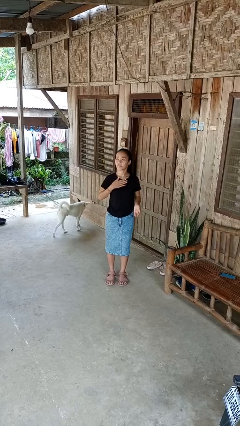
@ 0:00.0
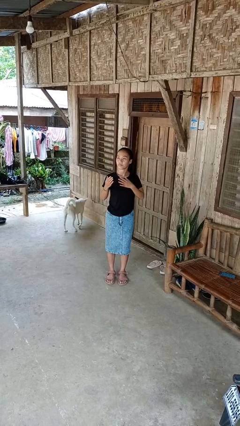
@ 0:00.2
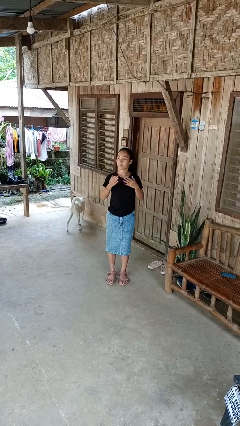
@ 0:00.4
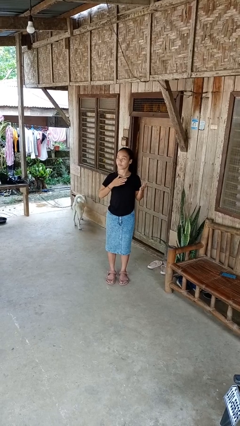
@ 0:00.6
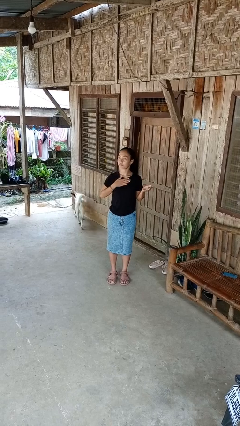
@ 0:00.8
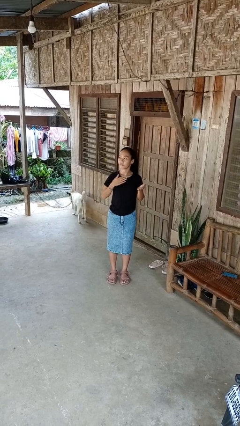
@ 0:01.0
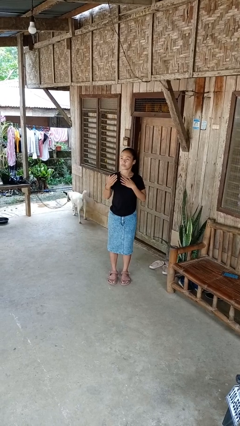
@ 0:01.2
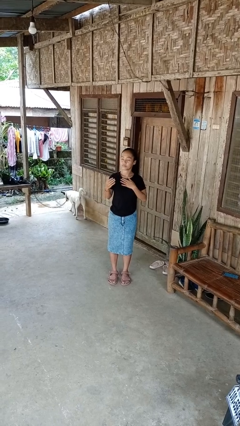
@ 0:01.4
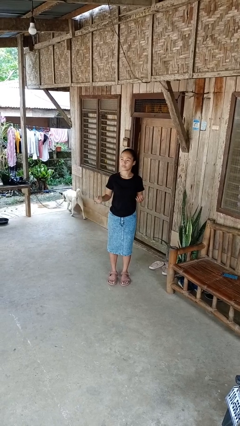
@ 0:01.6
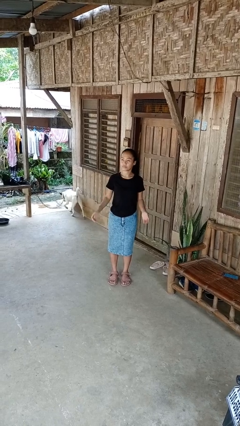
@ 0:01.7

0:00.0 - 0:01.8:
person drums on chest

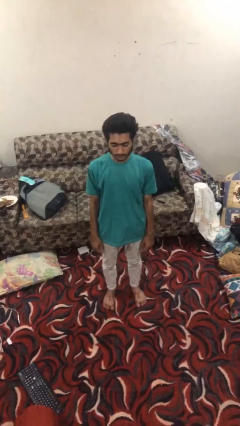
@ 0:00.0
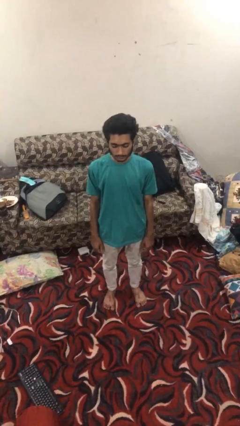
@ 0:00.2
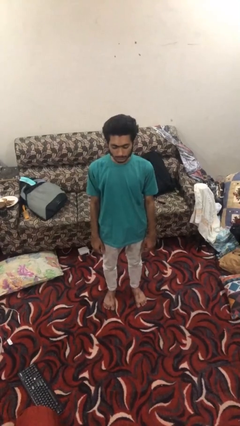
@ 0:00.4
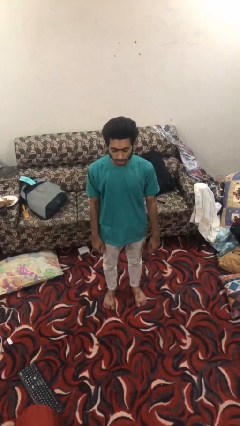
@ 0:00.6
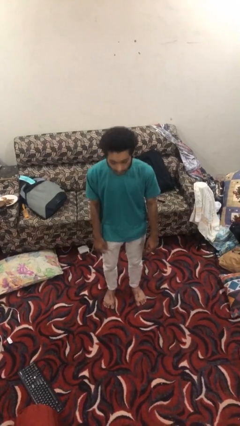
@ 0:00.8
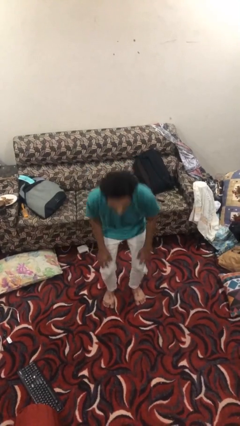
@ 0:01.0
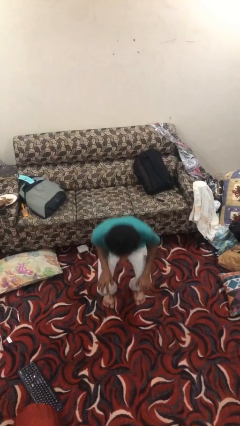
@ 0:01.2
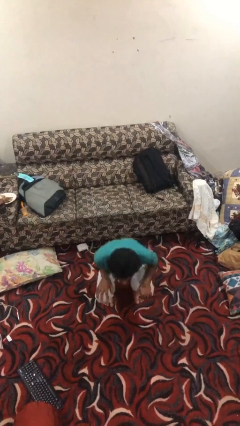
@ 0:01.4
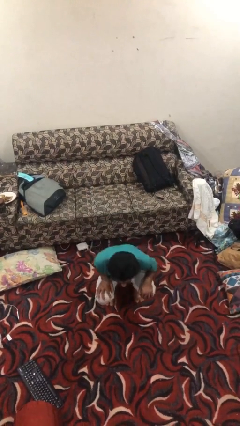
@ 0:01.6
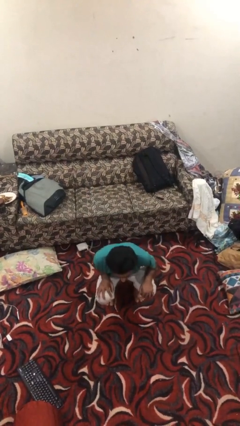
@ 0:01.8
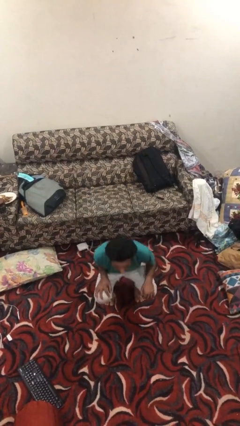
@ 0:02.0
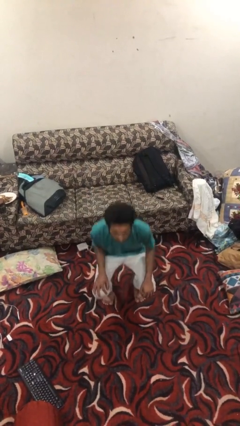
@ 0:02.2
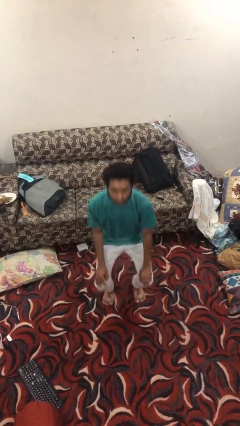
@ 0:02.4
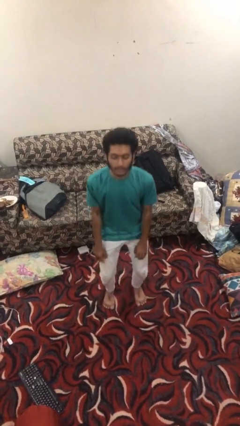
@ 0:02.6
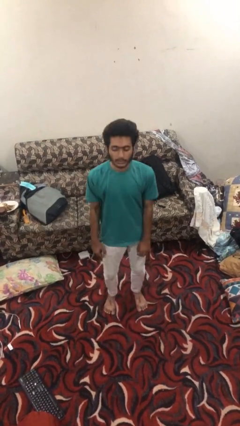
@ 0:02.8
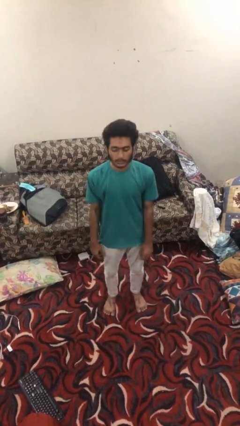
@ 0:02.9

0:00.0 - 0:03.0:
person exercises with situp

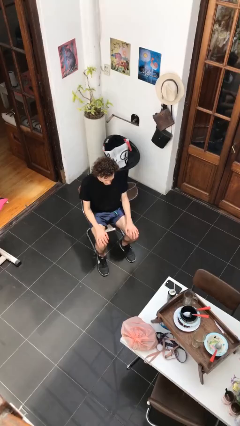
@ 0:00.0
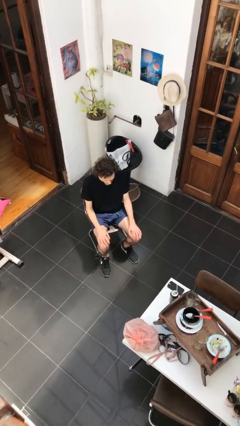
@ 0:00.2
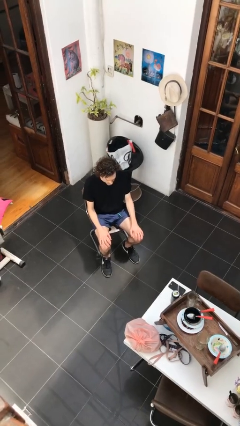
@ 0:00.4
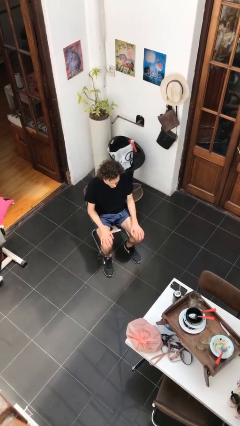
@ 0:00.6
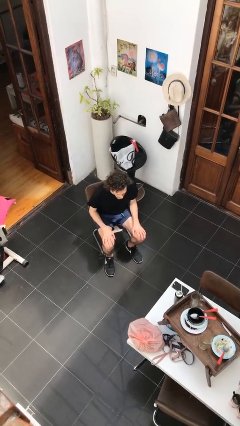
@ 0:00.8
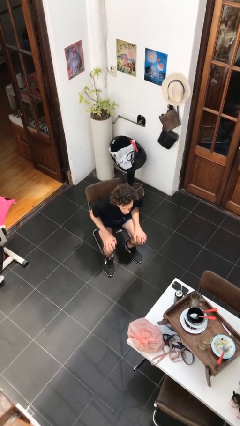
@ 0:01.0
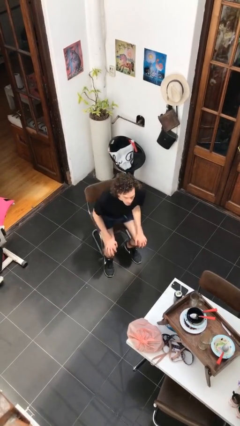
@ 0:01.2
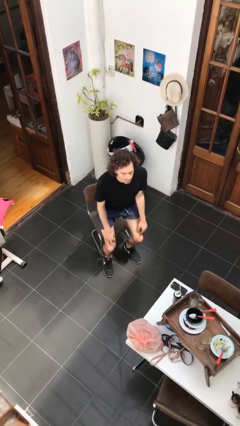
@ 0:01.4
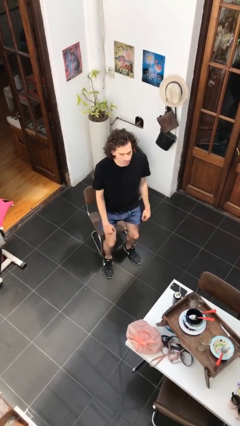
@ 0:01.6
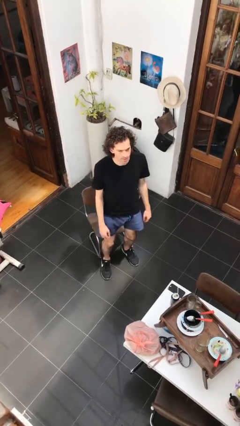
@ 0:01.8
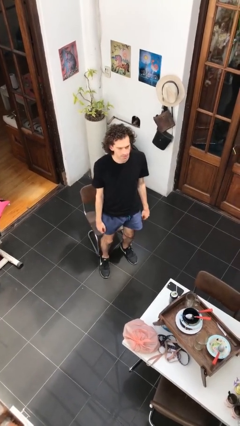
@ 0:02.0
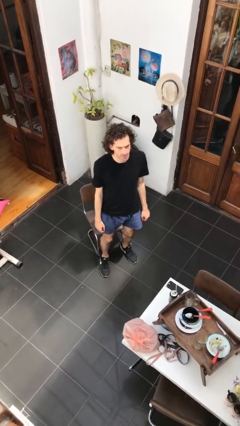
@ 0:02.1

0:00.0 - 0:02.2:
person stands up

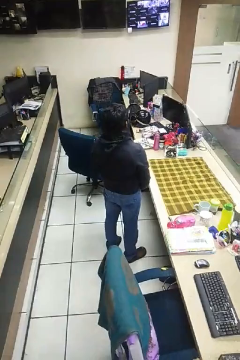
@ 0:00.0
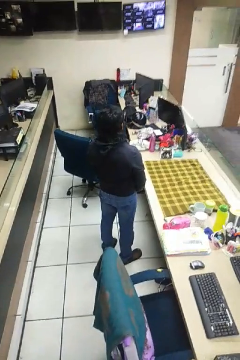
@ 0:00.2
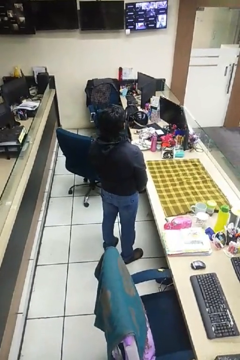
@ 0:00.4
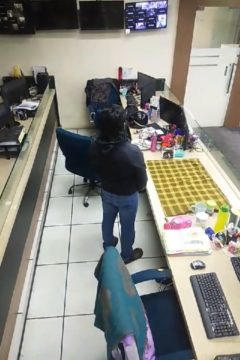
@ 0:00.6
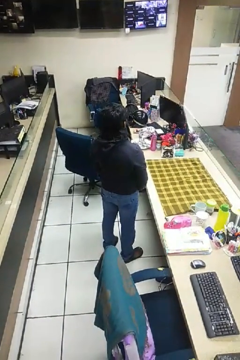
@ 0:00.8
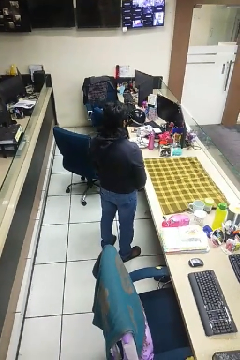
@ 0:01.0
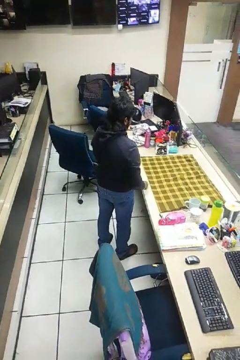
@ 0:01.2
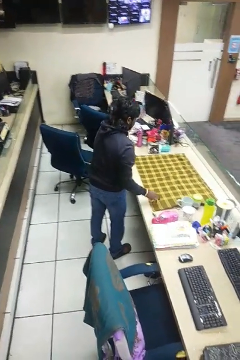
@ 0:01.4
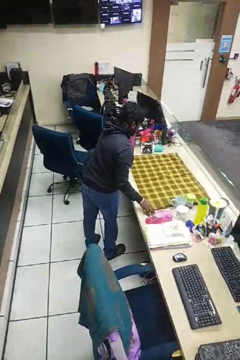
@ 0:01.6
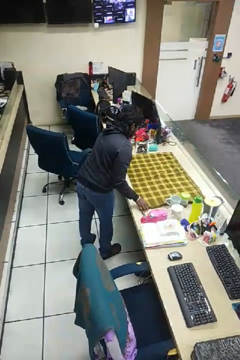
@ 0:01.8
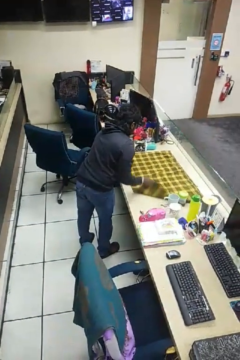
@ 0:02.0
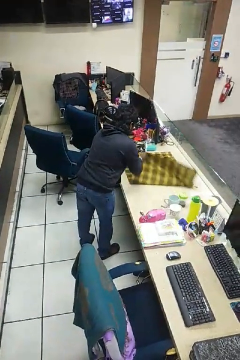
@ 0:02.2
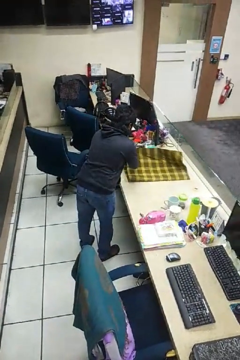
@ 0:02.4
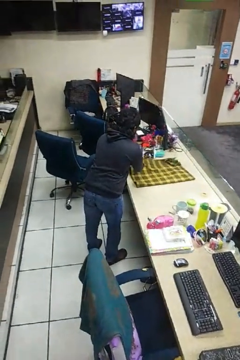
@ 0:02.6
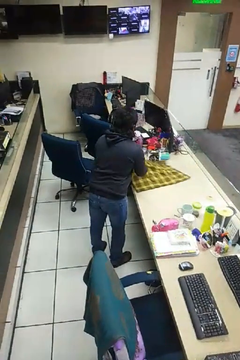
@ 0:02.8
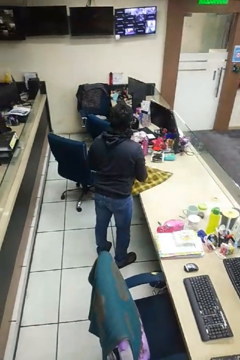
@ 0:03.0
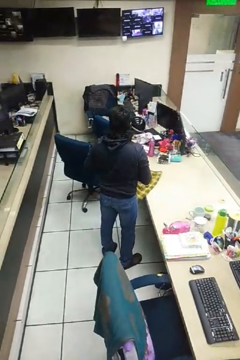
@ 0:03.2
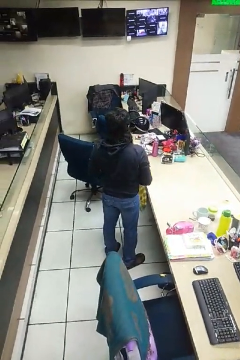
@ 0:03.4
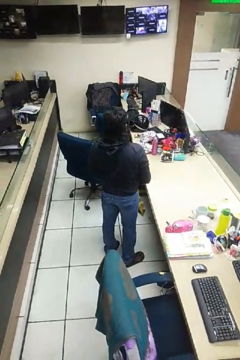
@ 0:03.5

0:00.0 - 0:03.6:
person folds tablecloth

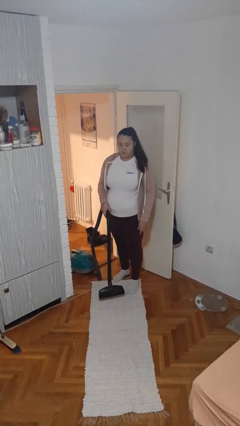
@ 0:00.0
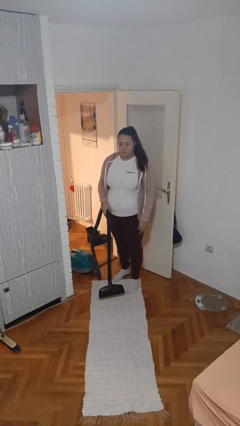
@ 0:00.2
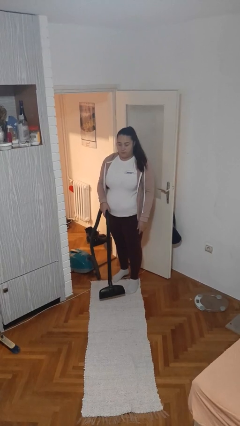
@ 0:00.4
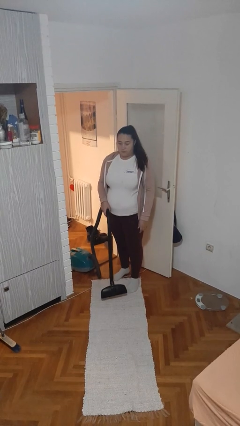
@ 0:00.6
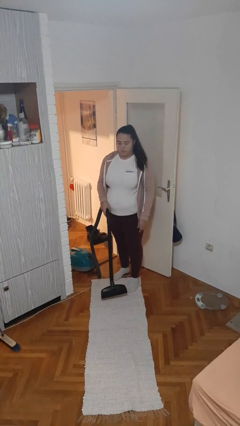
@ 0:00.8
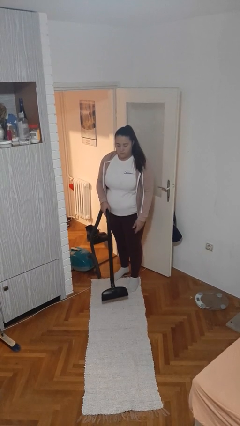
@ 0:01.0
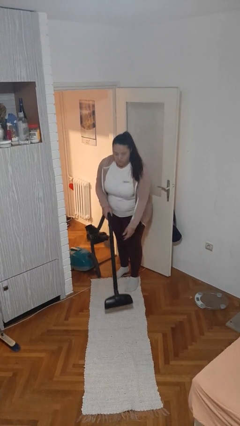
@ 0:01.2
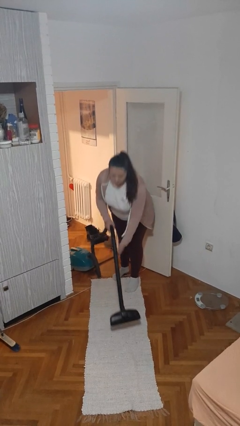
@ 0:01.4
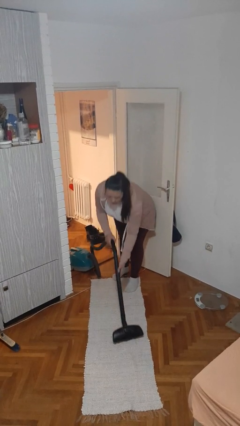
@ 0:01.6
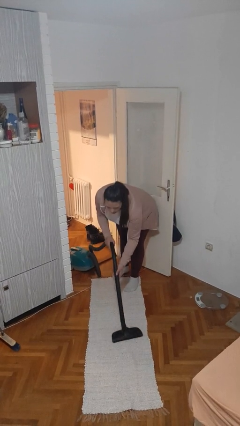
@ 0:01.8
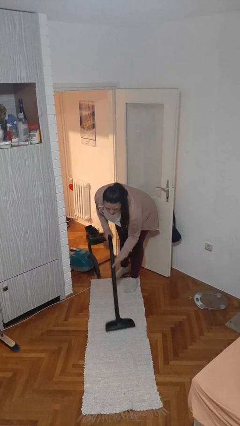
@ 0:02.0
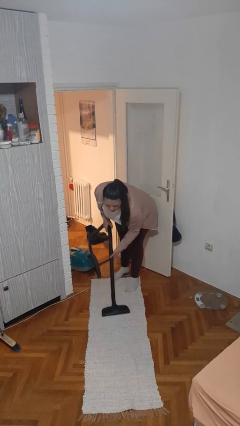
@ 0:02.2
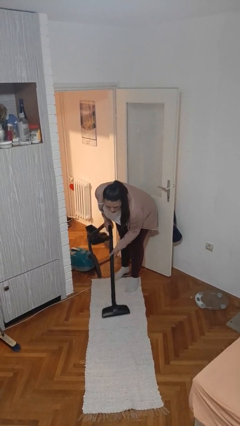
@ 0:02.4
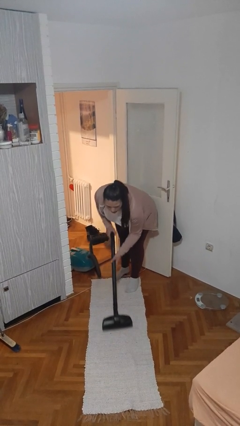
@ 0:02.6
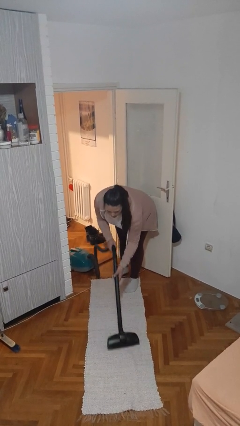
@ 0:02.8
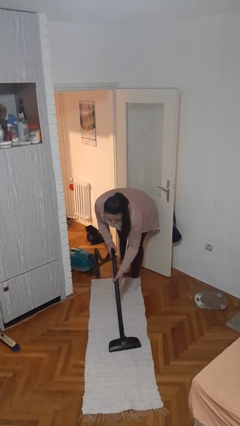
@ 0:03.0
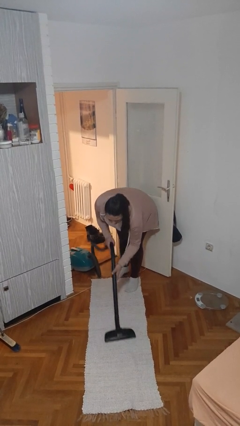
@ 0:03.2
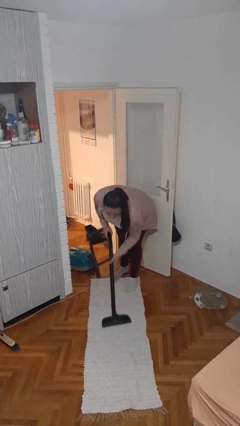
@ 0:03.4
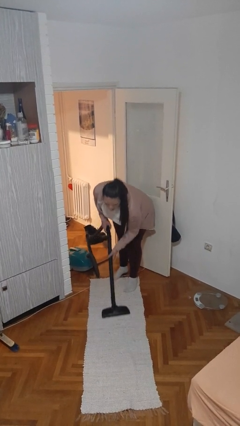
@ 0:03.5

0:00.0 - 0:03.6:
person vacuums carpet

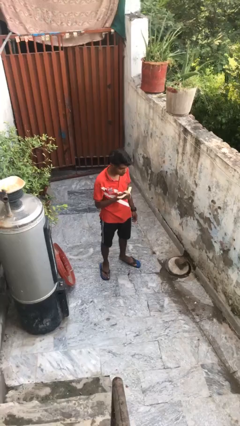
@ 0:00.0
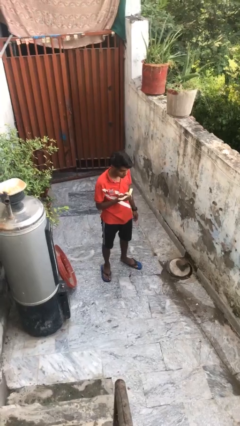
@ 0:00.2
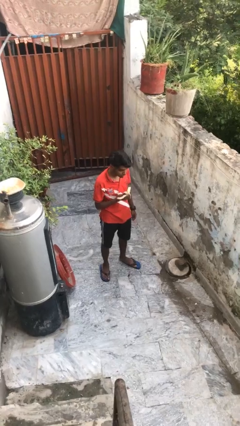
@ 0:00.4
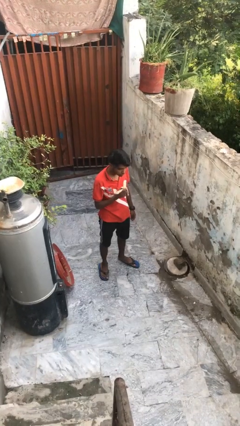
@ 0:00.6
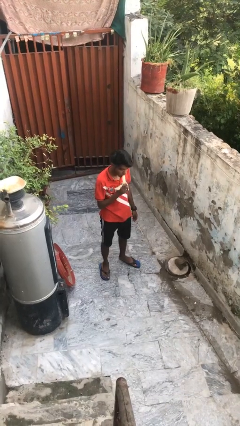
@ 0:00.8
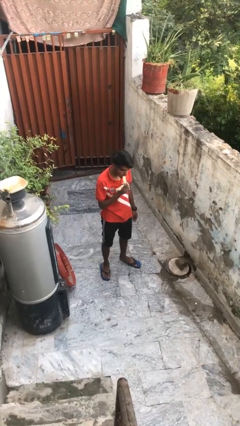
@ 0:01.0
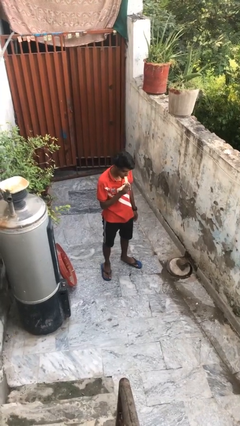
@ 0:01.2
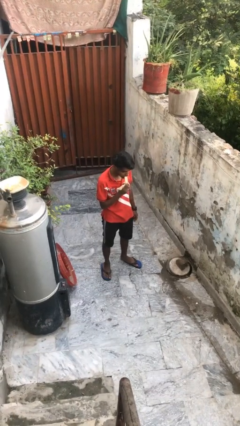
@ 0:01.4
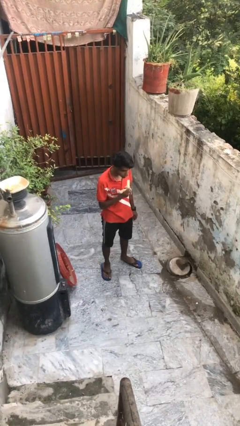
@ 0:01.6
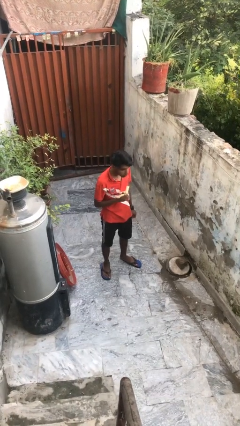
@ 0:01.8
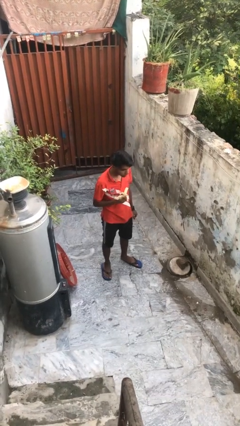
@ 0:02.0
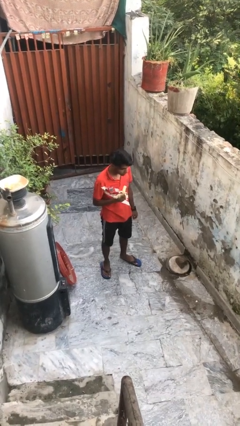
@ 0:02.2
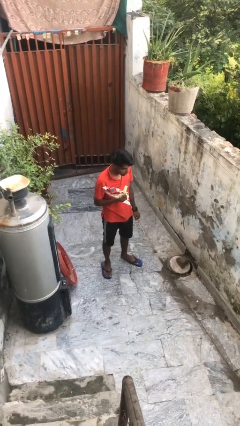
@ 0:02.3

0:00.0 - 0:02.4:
person eats banana

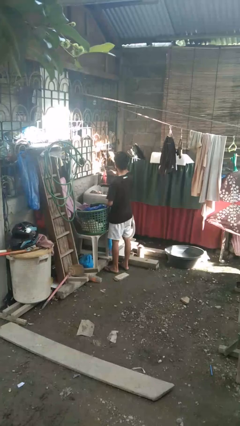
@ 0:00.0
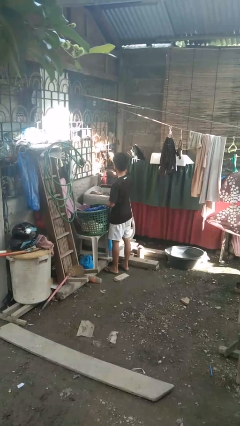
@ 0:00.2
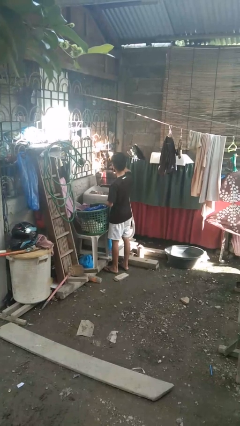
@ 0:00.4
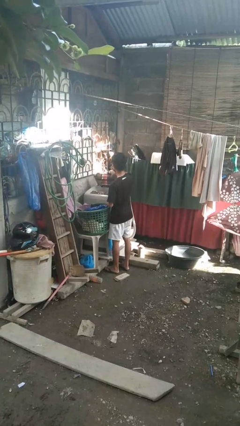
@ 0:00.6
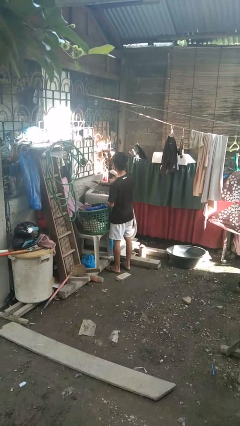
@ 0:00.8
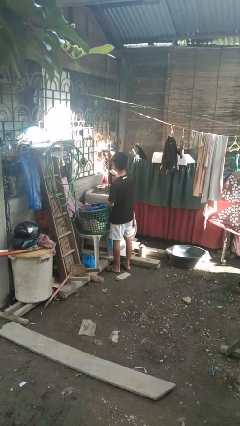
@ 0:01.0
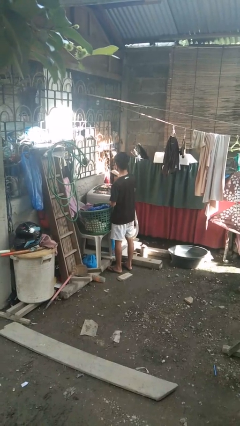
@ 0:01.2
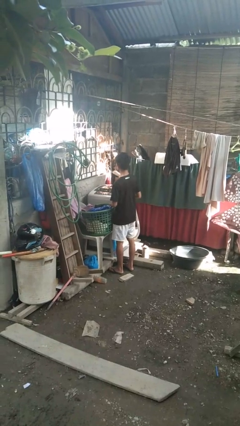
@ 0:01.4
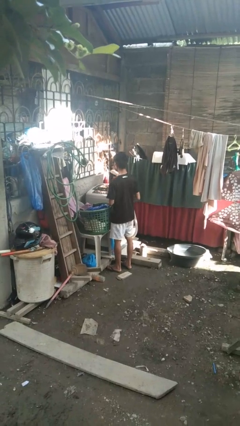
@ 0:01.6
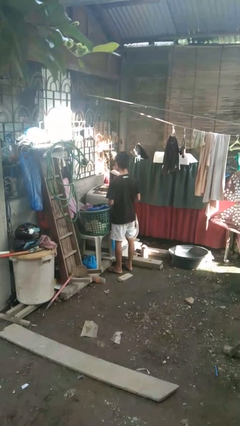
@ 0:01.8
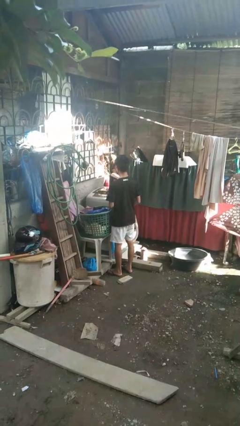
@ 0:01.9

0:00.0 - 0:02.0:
person closes clothes washer
